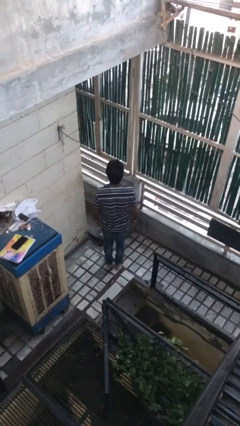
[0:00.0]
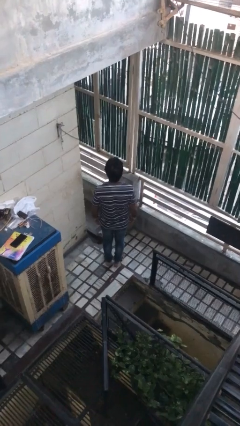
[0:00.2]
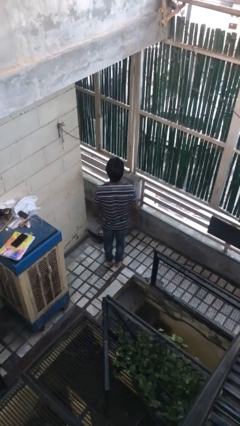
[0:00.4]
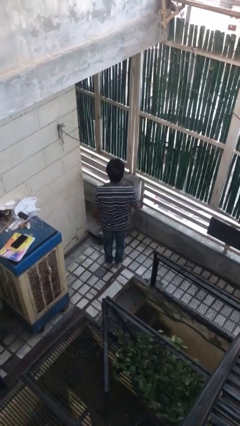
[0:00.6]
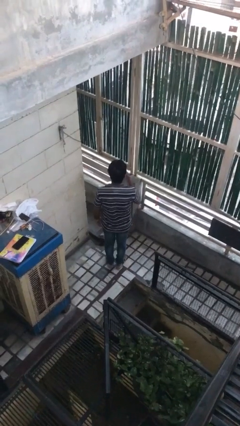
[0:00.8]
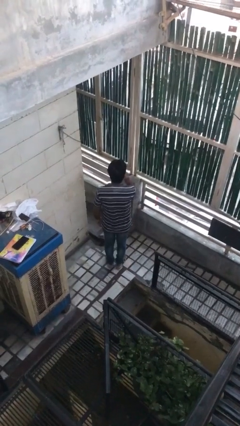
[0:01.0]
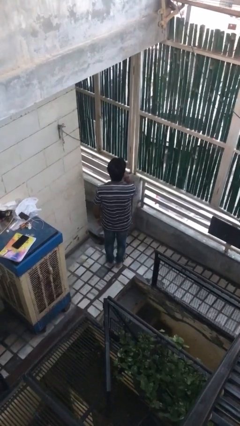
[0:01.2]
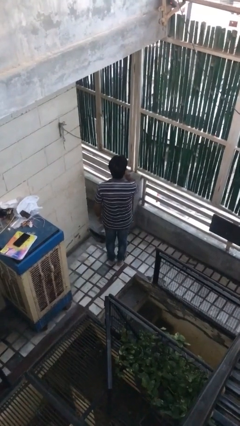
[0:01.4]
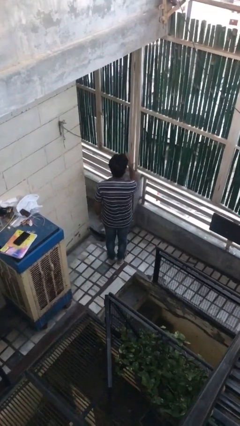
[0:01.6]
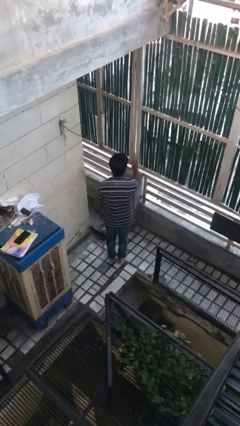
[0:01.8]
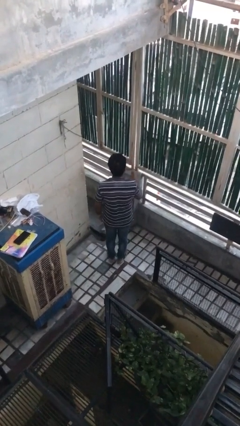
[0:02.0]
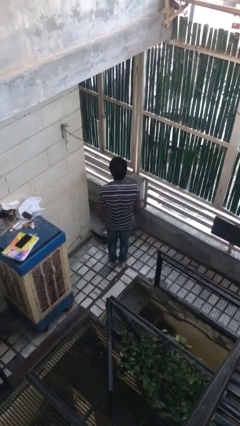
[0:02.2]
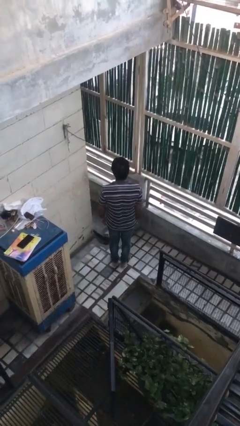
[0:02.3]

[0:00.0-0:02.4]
person gestures blow kiss

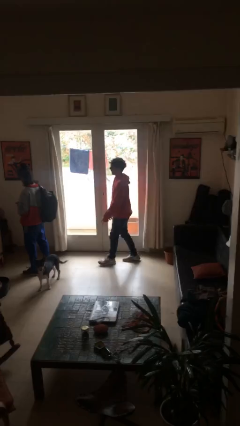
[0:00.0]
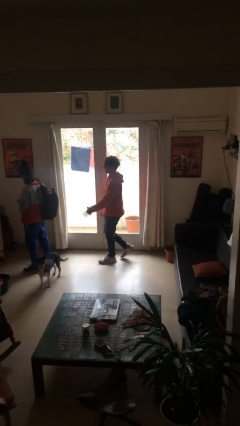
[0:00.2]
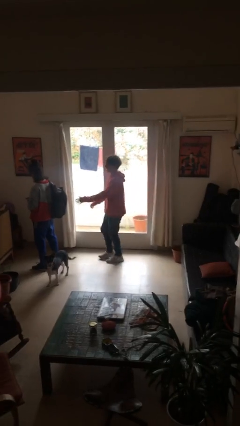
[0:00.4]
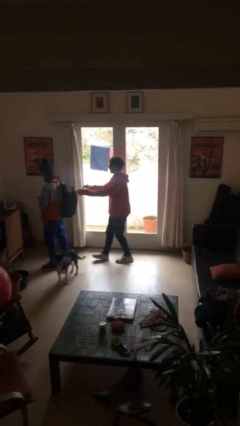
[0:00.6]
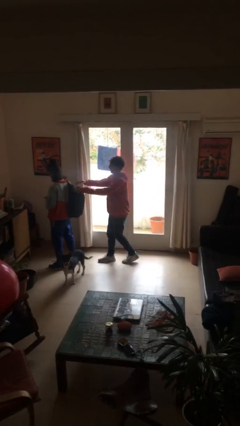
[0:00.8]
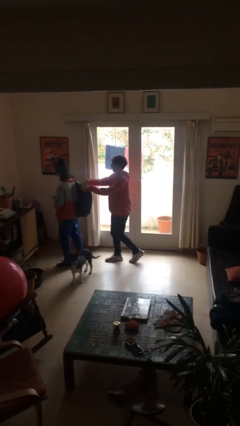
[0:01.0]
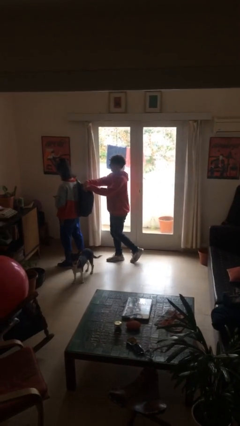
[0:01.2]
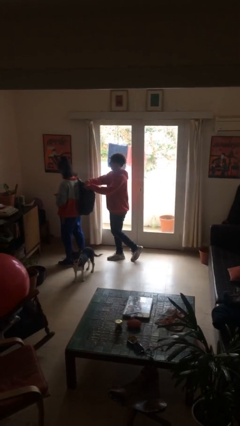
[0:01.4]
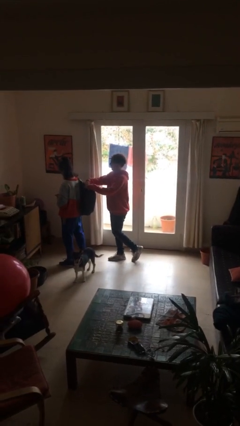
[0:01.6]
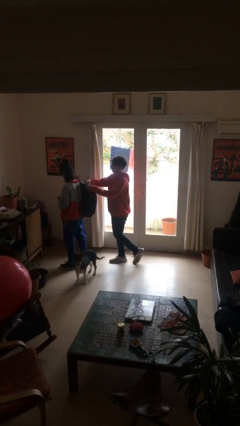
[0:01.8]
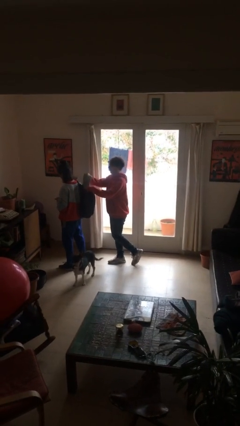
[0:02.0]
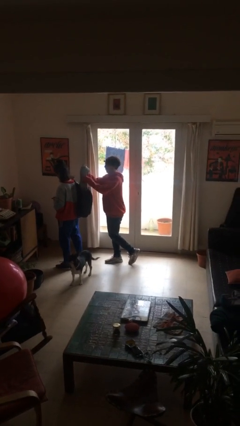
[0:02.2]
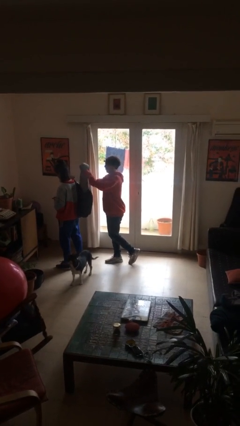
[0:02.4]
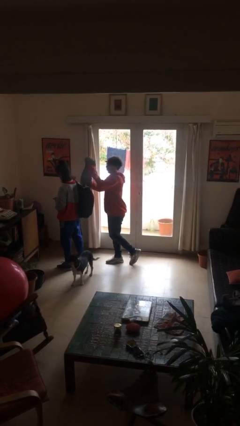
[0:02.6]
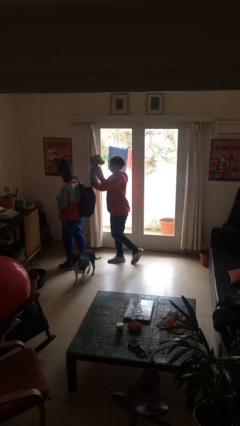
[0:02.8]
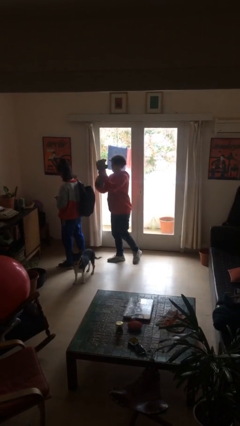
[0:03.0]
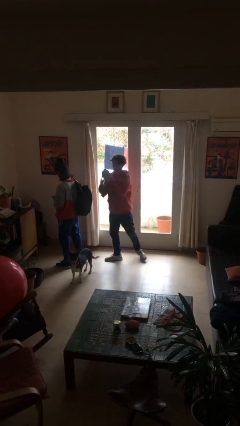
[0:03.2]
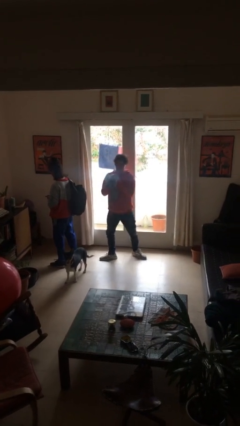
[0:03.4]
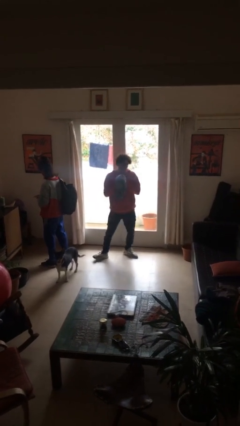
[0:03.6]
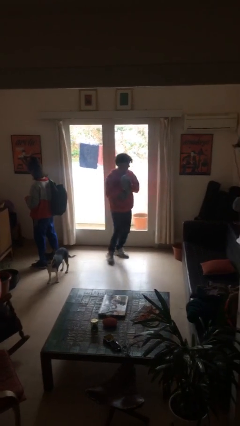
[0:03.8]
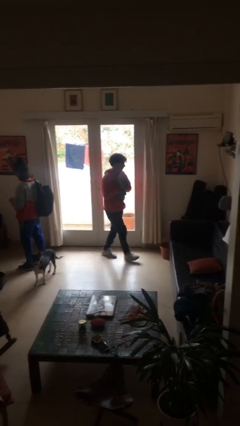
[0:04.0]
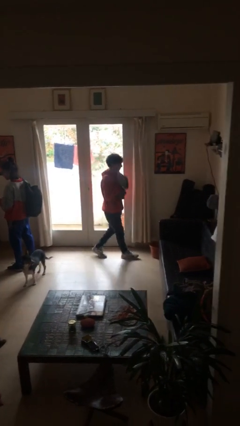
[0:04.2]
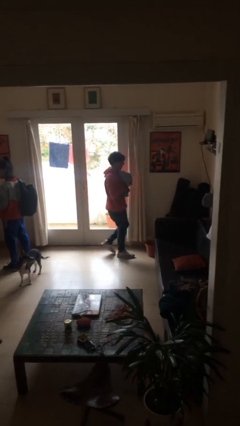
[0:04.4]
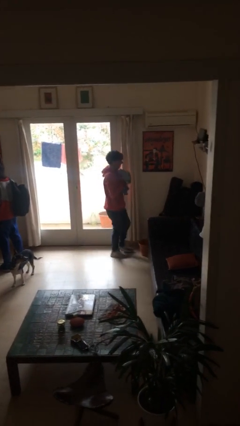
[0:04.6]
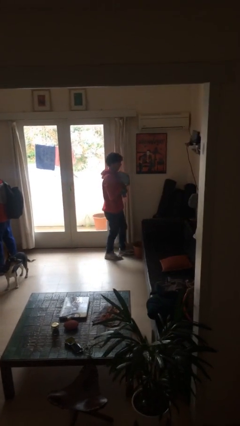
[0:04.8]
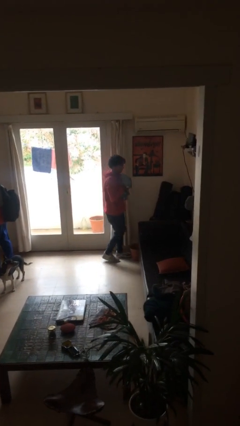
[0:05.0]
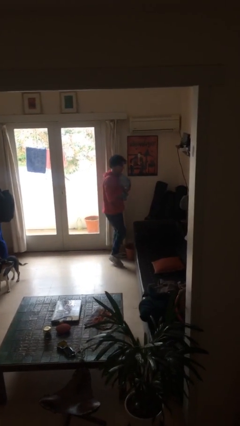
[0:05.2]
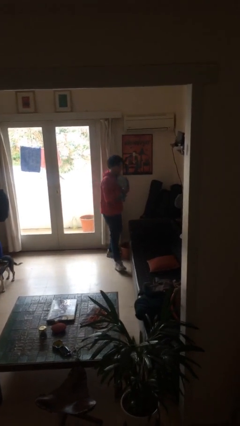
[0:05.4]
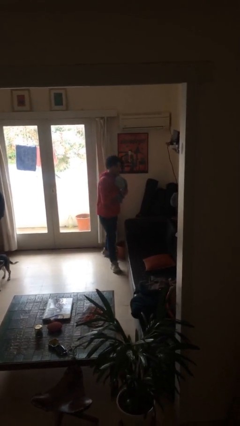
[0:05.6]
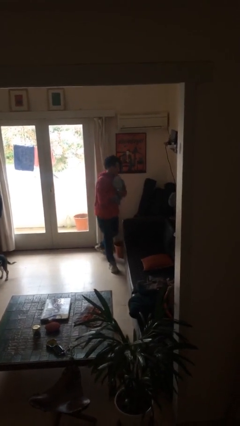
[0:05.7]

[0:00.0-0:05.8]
person steals object from person

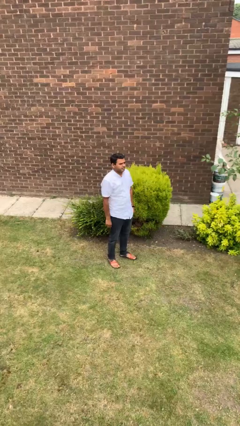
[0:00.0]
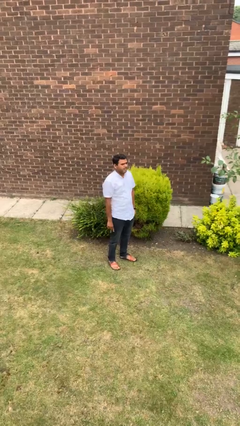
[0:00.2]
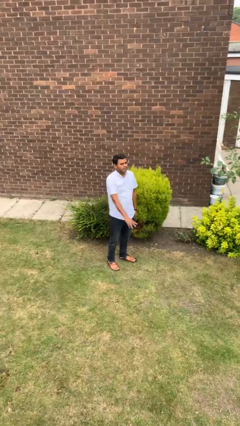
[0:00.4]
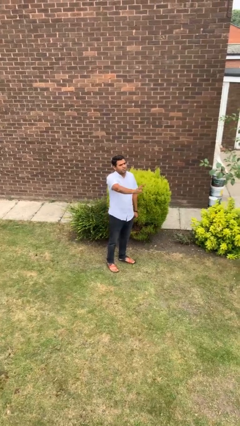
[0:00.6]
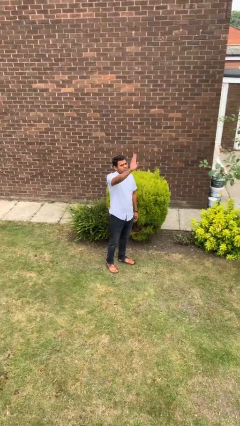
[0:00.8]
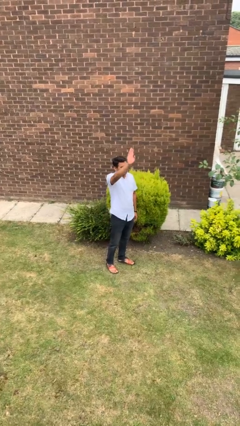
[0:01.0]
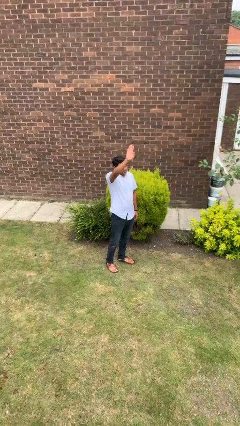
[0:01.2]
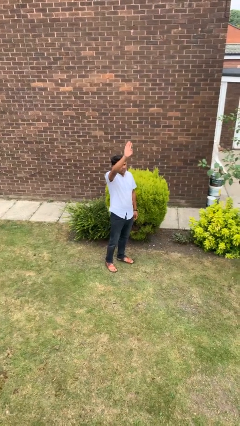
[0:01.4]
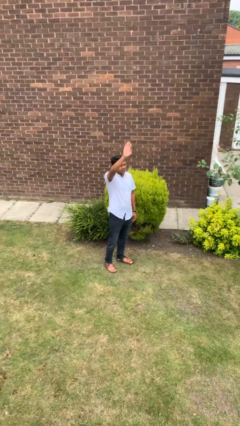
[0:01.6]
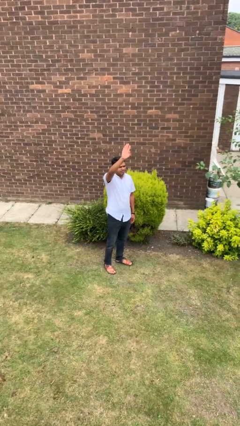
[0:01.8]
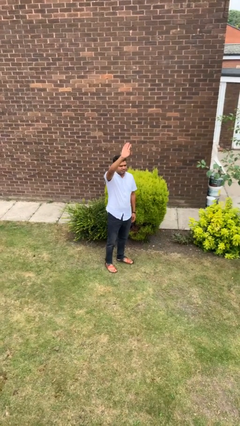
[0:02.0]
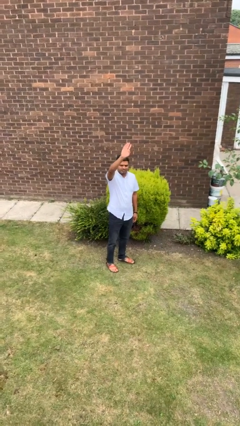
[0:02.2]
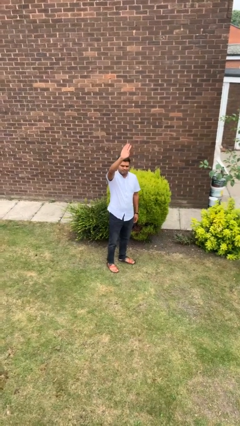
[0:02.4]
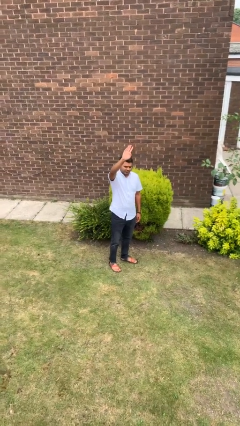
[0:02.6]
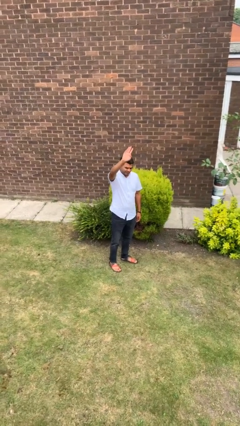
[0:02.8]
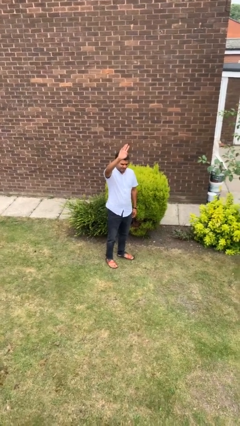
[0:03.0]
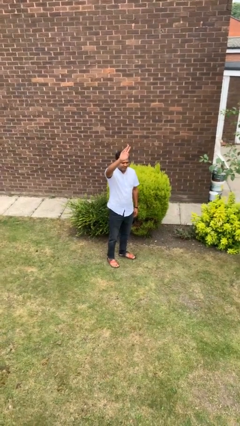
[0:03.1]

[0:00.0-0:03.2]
person gestures raise hand

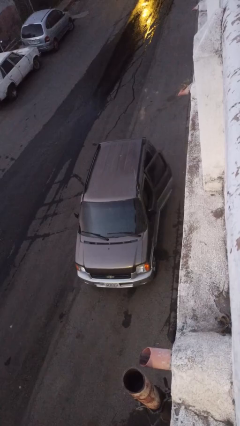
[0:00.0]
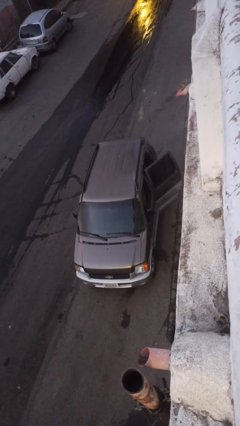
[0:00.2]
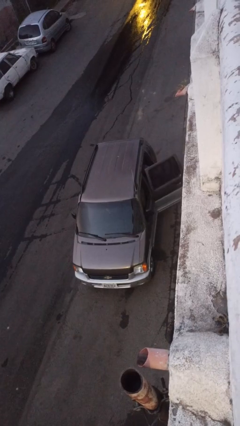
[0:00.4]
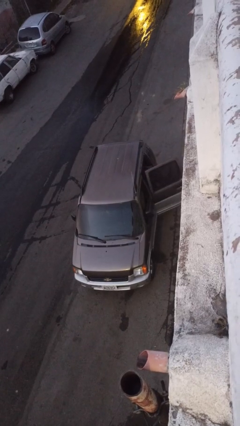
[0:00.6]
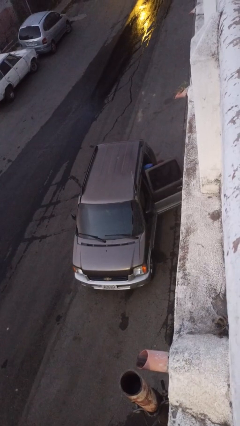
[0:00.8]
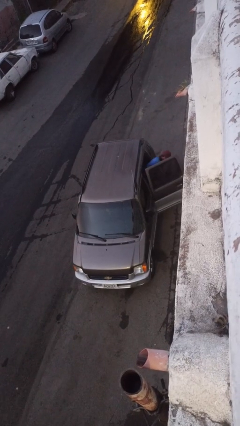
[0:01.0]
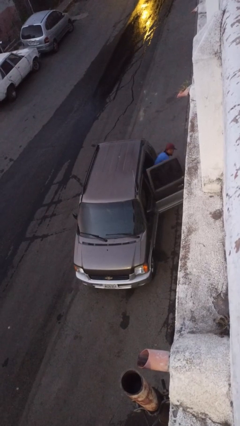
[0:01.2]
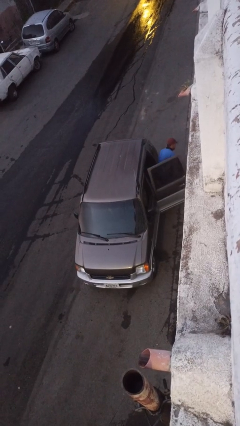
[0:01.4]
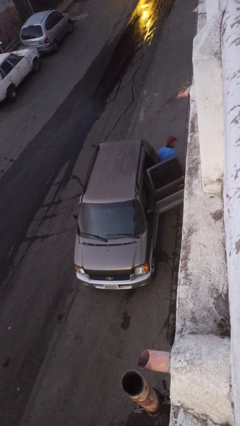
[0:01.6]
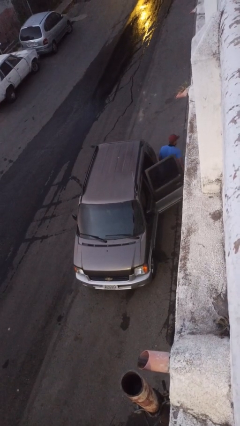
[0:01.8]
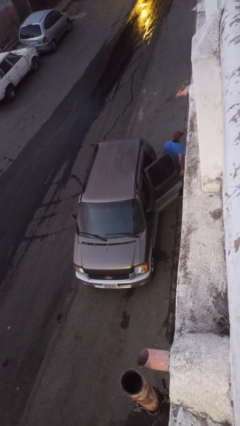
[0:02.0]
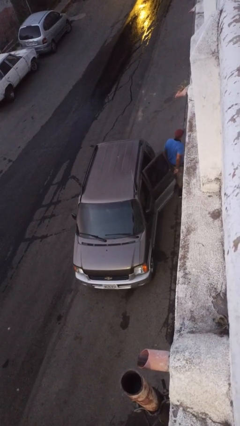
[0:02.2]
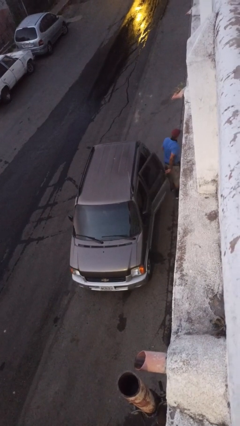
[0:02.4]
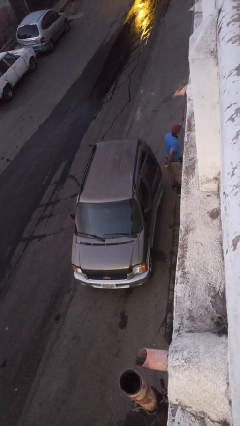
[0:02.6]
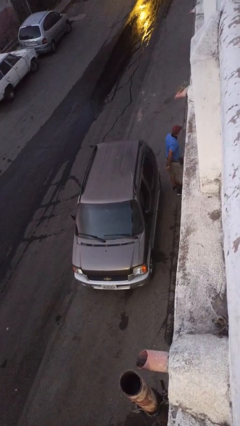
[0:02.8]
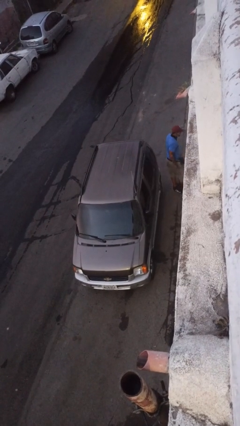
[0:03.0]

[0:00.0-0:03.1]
car drops off person

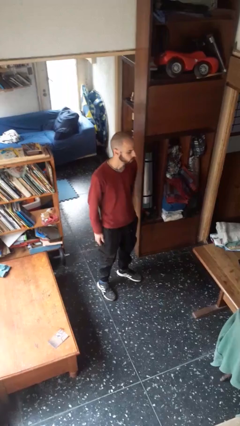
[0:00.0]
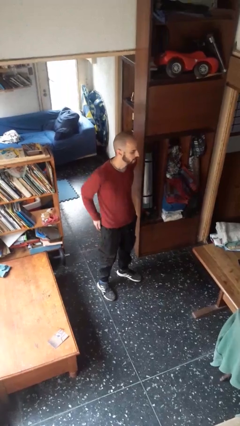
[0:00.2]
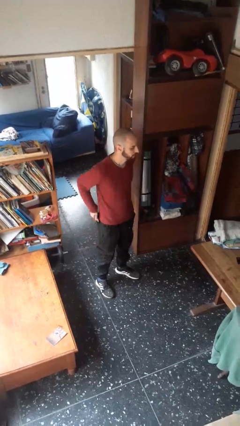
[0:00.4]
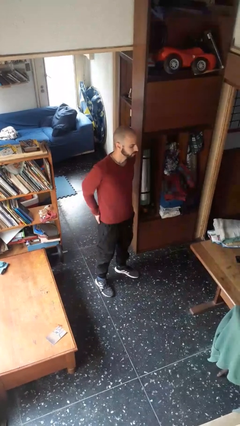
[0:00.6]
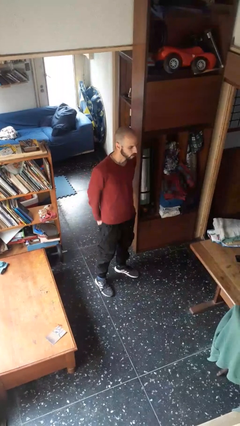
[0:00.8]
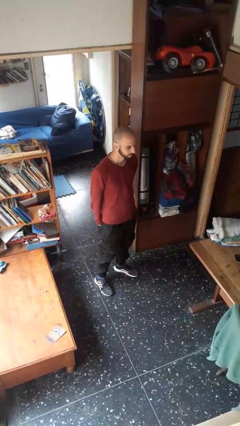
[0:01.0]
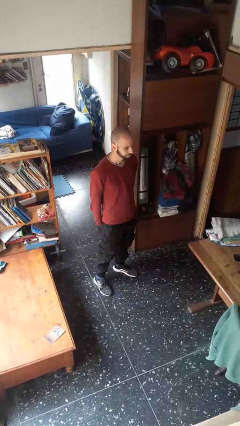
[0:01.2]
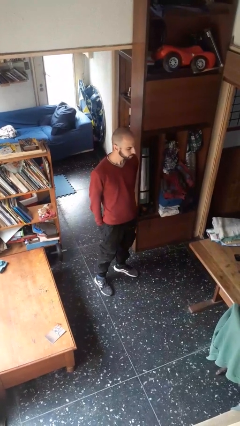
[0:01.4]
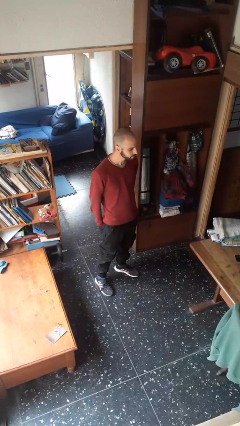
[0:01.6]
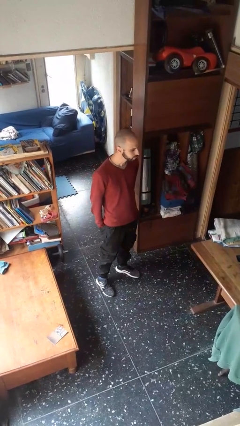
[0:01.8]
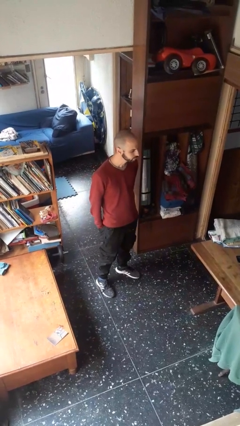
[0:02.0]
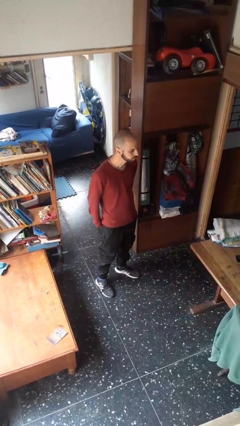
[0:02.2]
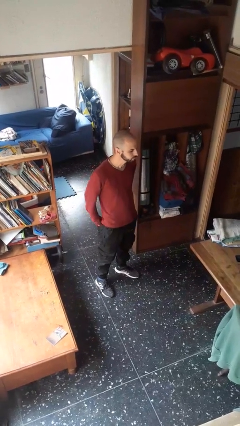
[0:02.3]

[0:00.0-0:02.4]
person puts hands in back pockets

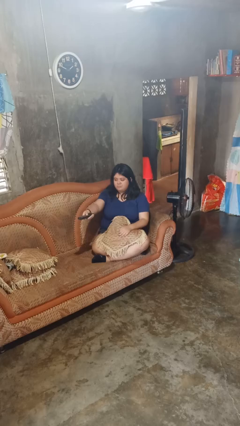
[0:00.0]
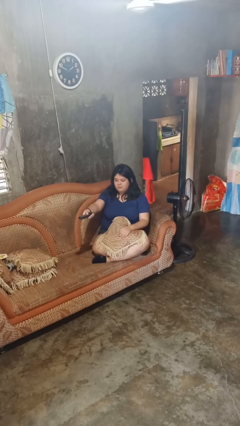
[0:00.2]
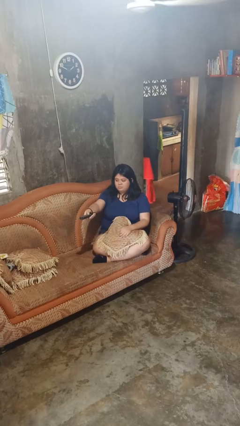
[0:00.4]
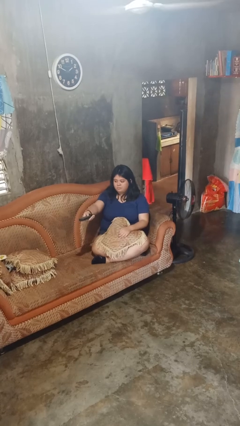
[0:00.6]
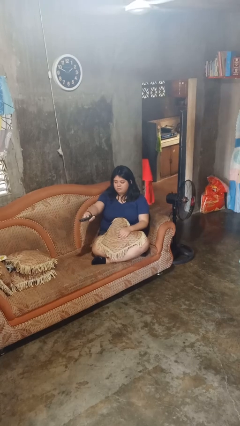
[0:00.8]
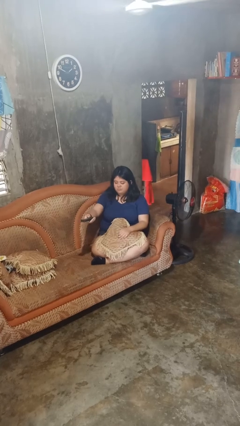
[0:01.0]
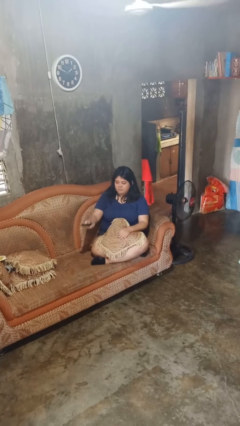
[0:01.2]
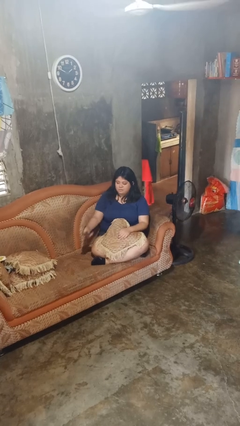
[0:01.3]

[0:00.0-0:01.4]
person uses television remote
